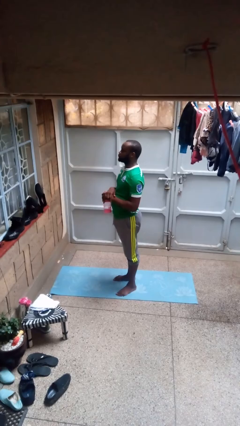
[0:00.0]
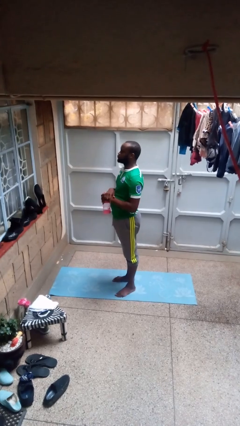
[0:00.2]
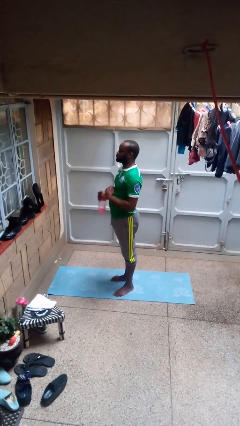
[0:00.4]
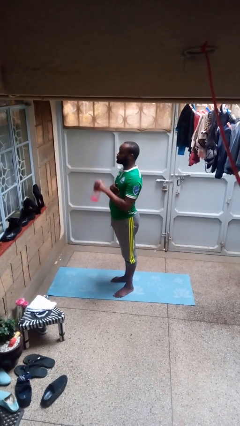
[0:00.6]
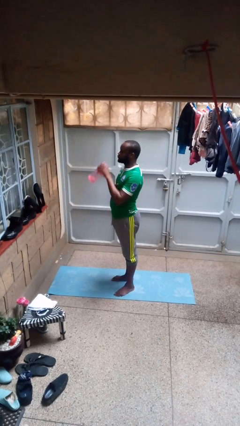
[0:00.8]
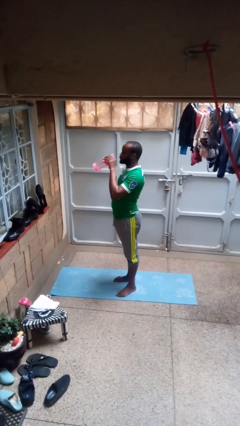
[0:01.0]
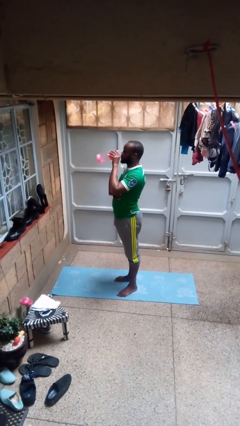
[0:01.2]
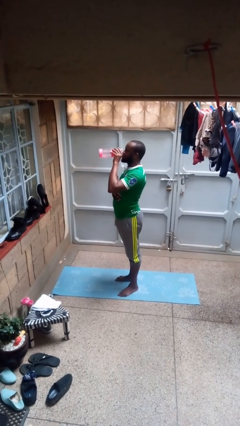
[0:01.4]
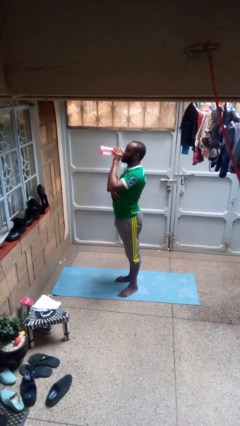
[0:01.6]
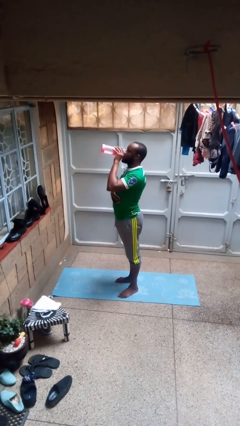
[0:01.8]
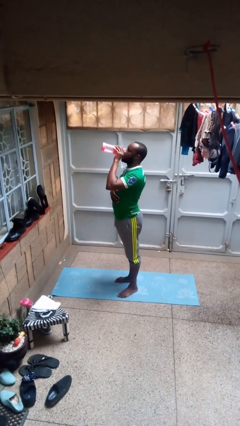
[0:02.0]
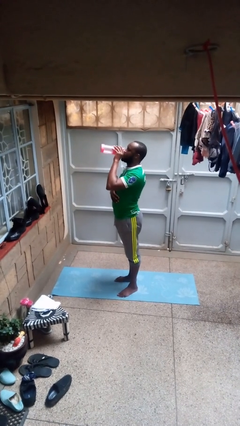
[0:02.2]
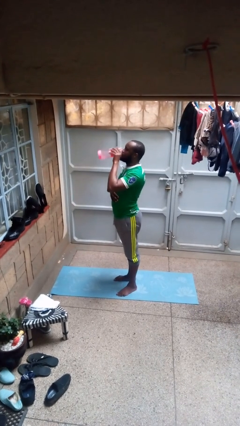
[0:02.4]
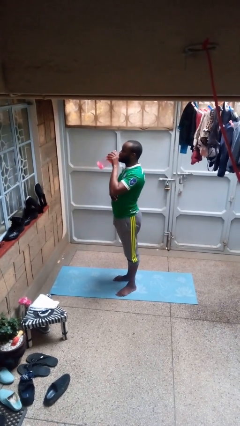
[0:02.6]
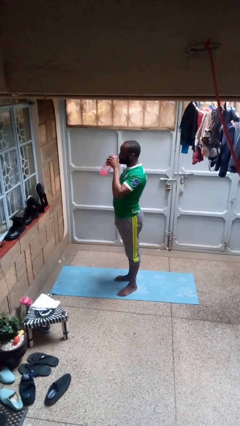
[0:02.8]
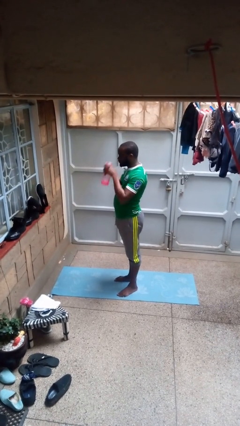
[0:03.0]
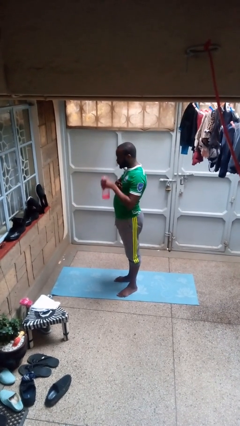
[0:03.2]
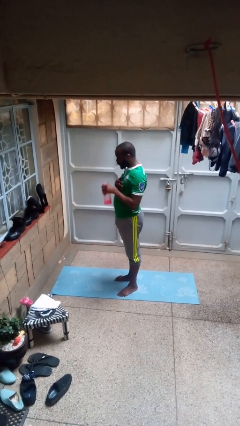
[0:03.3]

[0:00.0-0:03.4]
person drinks from bottle

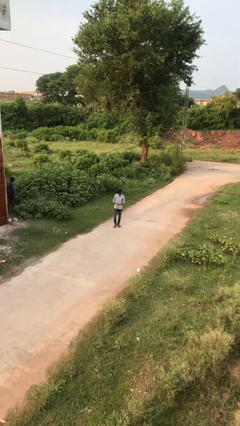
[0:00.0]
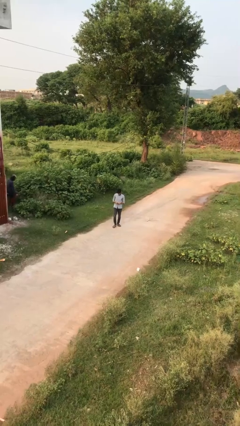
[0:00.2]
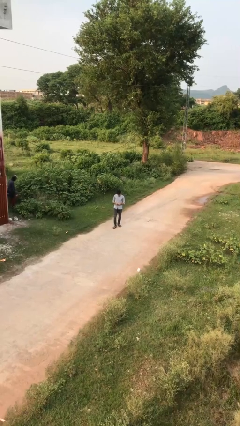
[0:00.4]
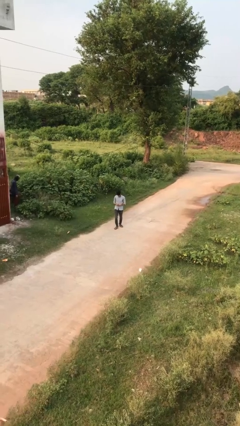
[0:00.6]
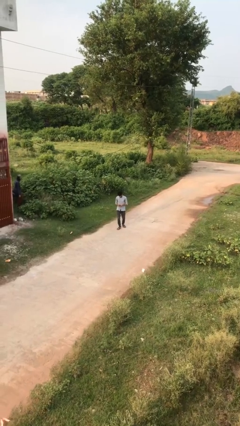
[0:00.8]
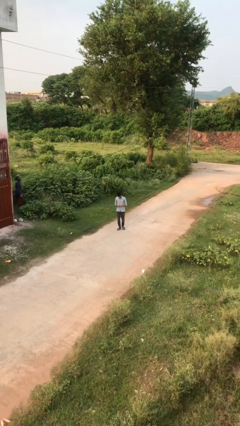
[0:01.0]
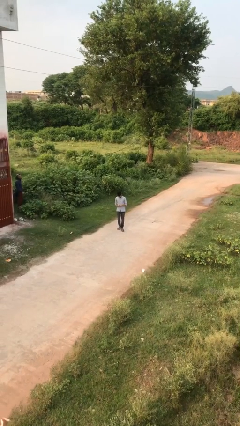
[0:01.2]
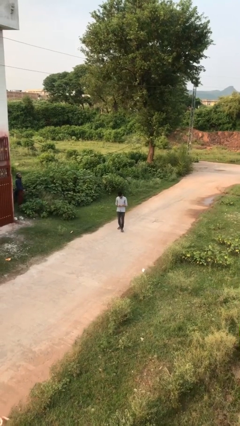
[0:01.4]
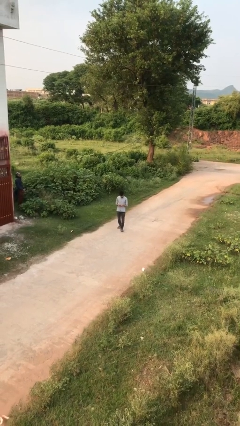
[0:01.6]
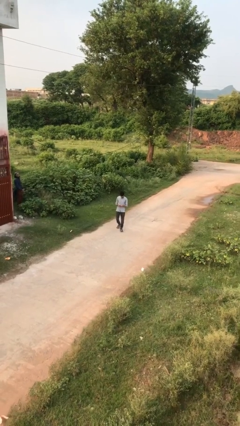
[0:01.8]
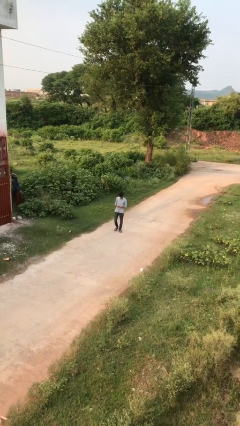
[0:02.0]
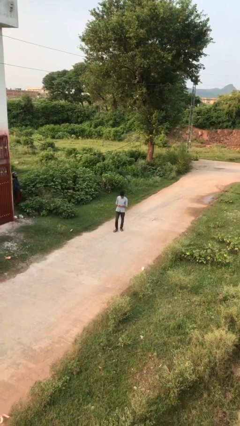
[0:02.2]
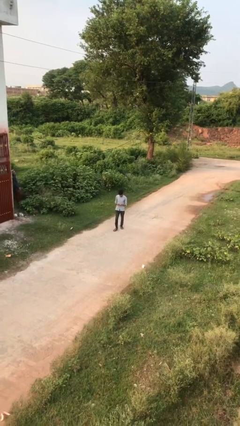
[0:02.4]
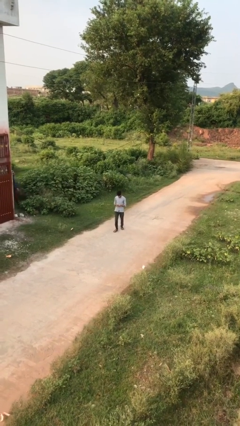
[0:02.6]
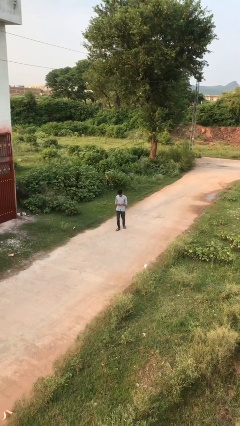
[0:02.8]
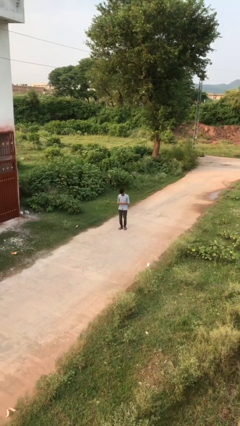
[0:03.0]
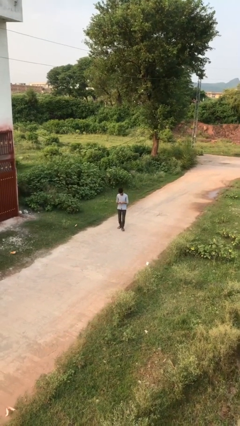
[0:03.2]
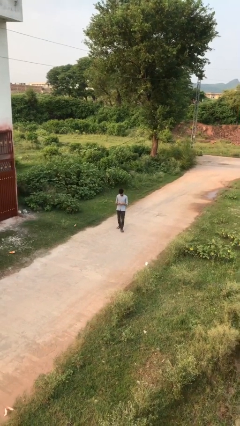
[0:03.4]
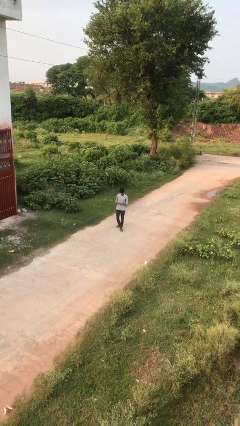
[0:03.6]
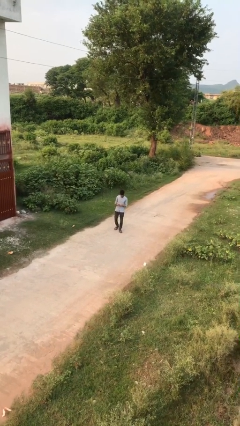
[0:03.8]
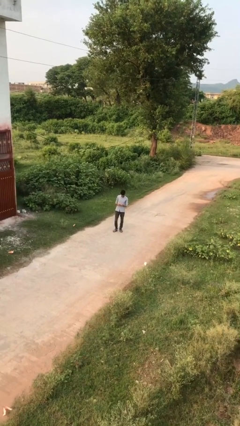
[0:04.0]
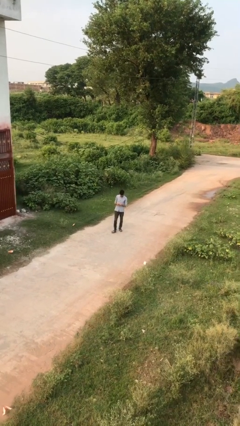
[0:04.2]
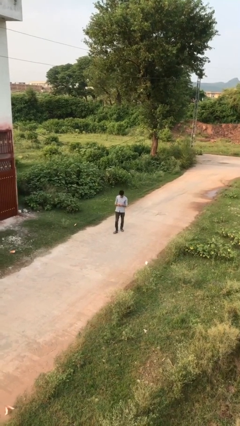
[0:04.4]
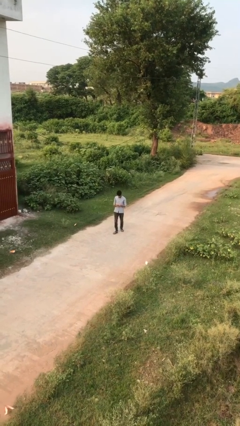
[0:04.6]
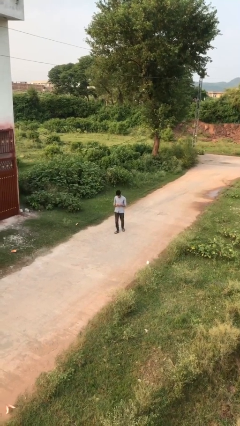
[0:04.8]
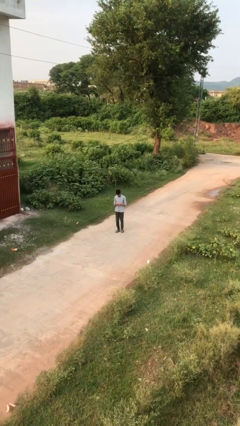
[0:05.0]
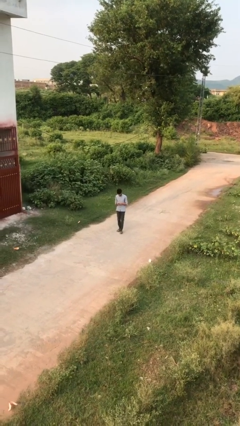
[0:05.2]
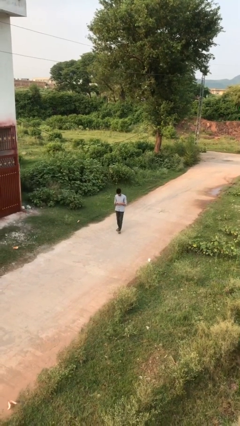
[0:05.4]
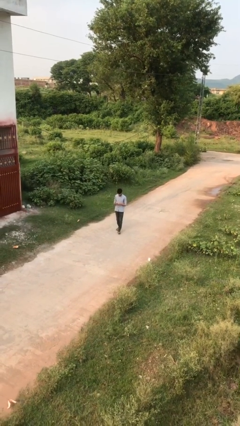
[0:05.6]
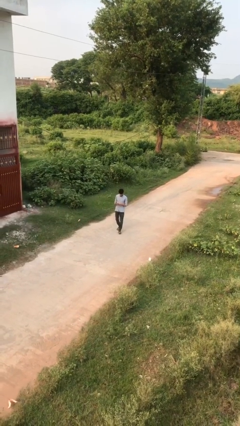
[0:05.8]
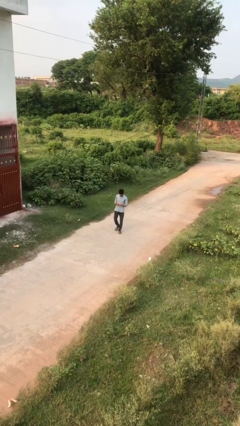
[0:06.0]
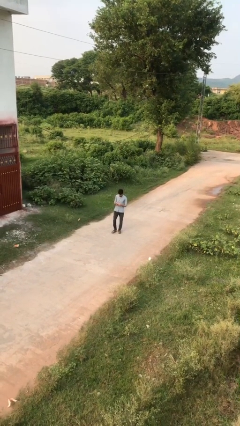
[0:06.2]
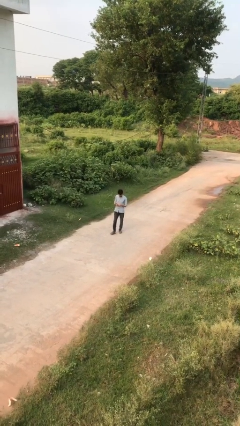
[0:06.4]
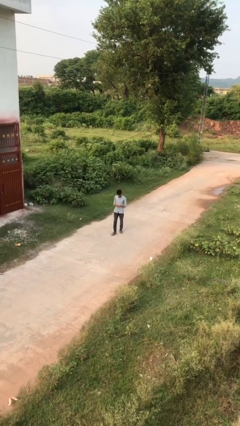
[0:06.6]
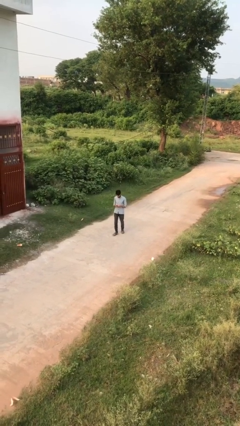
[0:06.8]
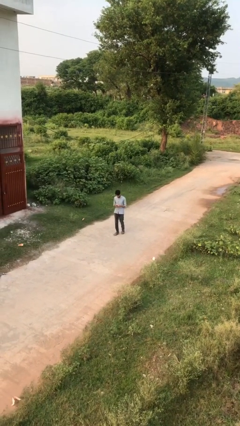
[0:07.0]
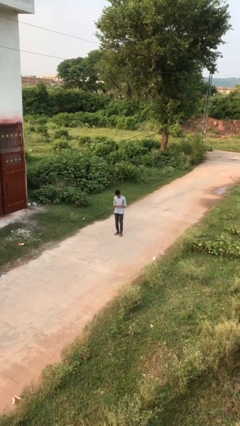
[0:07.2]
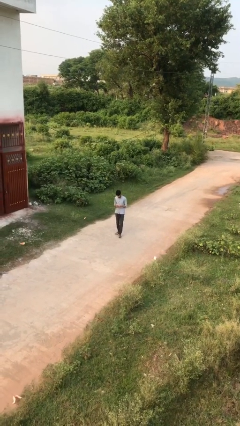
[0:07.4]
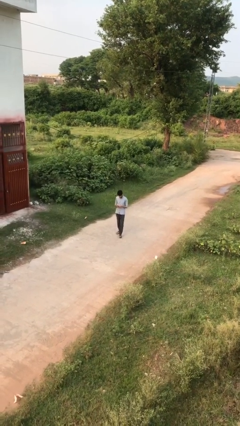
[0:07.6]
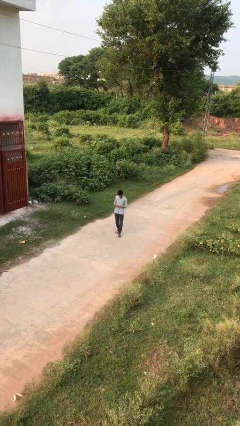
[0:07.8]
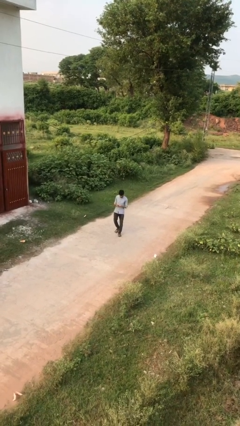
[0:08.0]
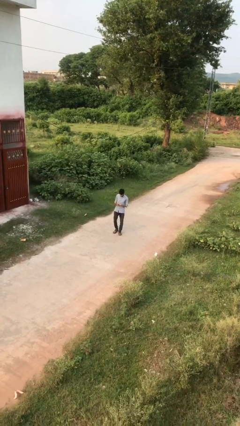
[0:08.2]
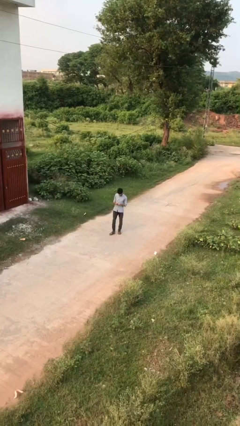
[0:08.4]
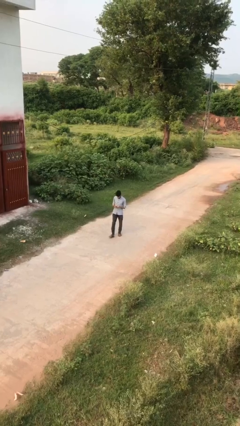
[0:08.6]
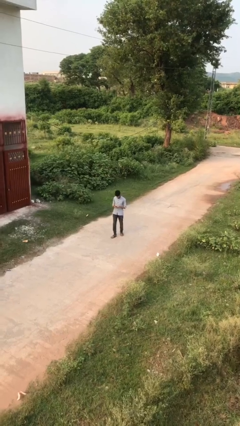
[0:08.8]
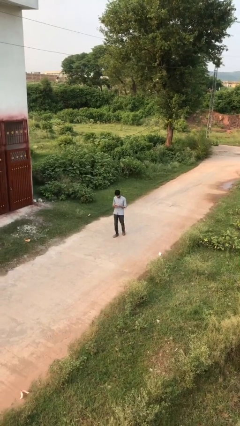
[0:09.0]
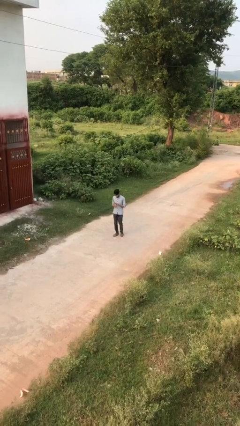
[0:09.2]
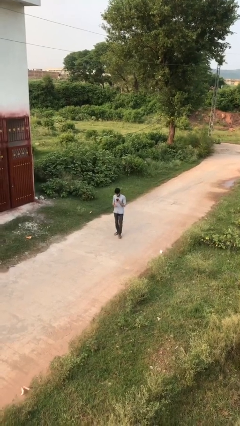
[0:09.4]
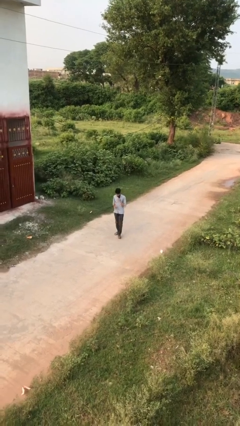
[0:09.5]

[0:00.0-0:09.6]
person texts on phone

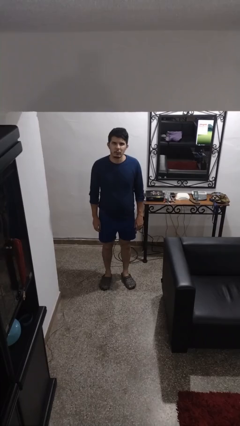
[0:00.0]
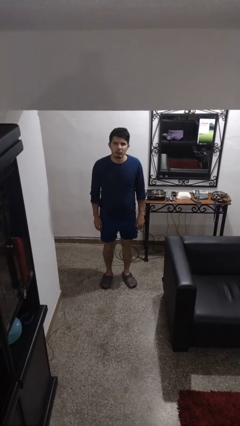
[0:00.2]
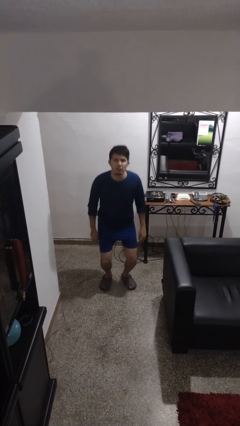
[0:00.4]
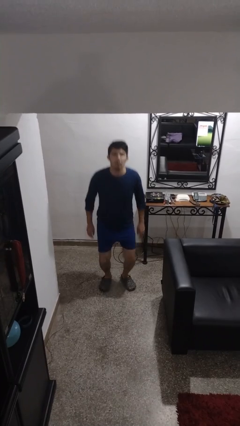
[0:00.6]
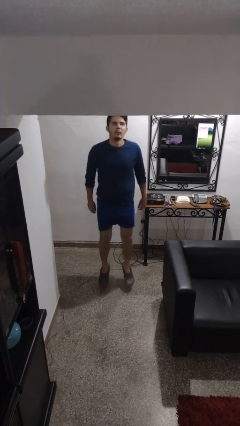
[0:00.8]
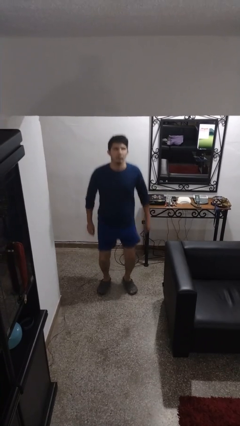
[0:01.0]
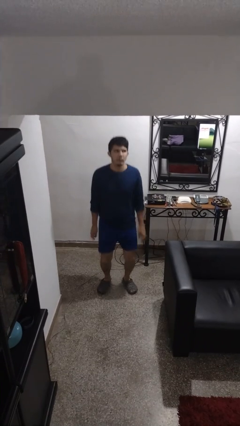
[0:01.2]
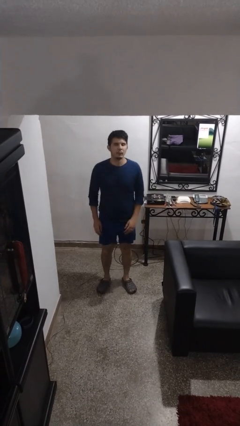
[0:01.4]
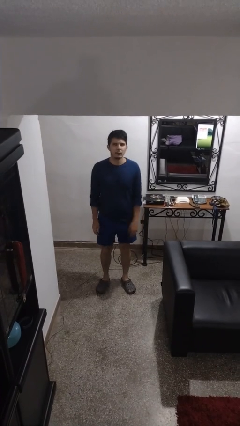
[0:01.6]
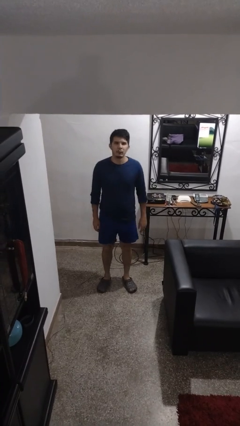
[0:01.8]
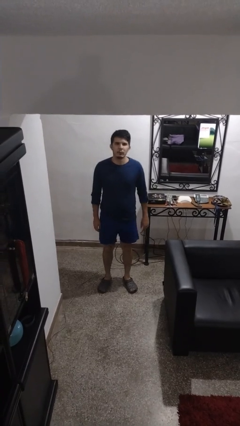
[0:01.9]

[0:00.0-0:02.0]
person jumps

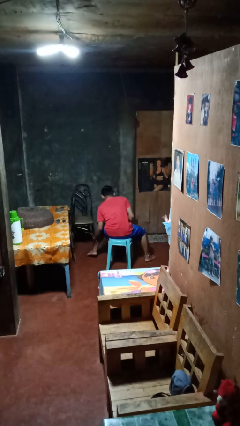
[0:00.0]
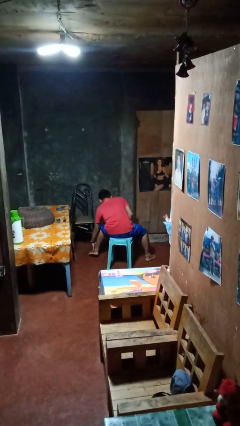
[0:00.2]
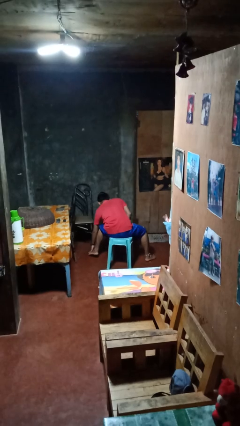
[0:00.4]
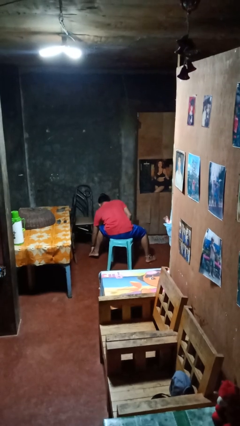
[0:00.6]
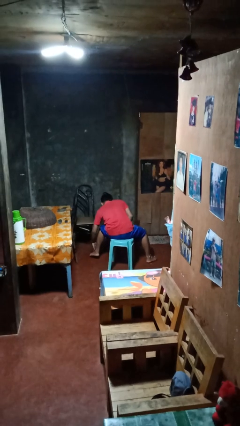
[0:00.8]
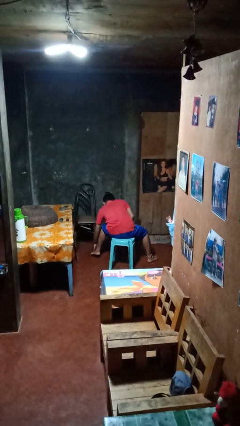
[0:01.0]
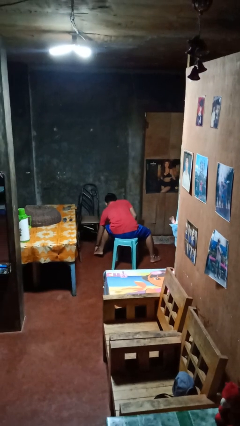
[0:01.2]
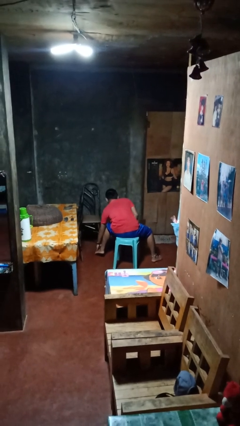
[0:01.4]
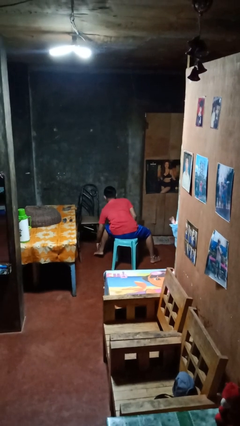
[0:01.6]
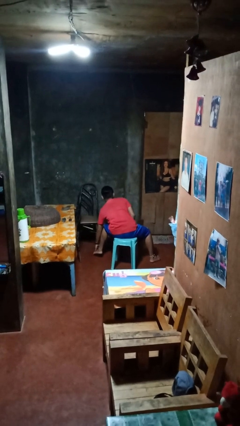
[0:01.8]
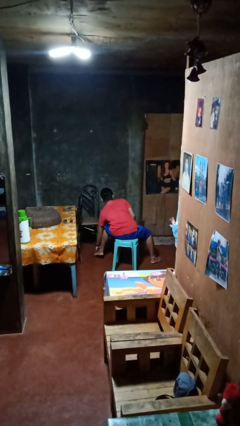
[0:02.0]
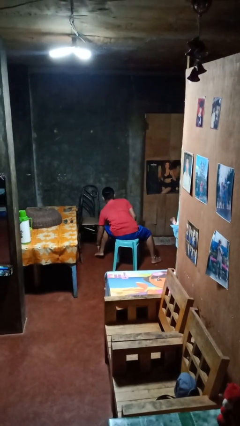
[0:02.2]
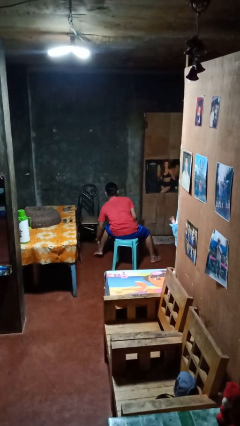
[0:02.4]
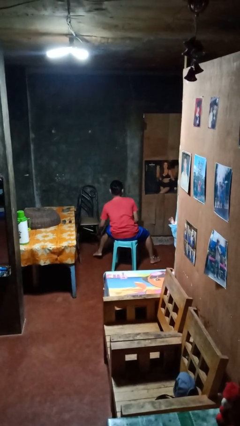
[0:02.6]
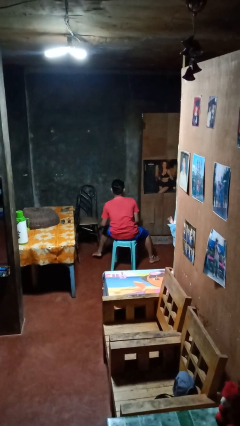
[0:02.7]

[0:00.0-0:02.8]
person rubs foot

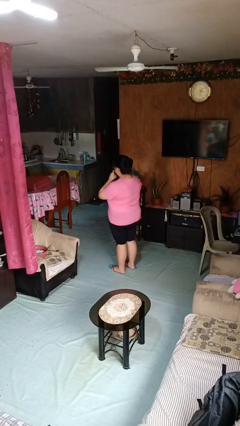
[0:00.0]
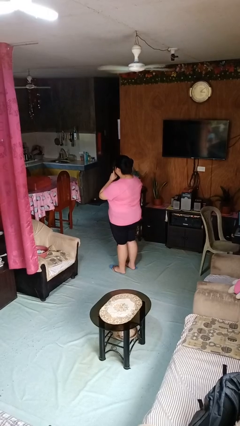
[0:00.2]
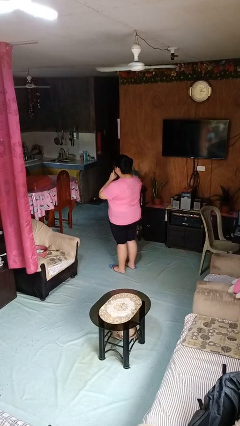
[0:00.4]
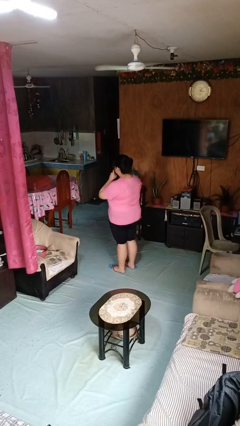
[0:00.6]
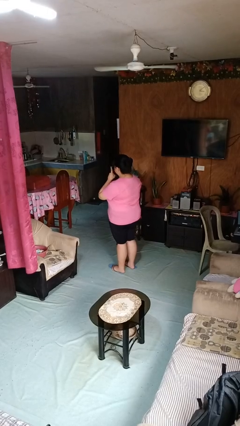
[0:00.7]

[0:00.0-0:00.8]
person gestures blow kiss
